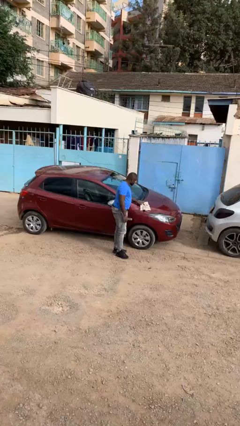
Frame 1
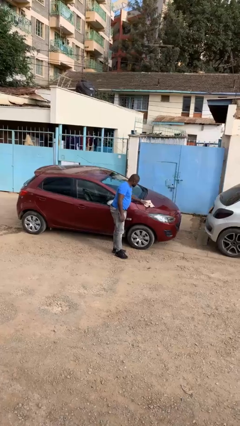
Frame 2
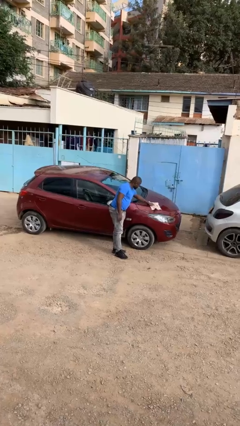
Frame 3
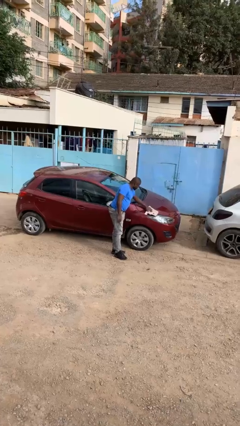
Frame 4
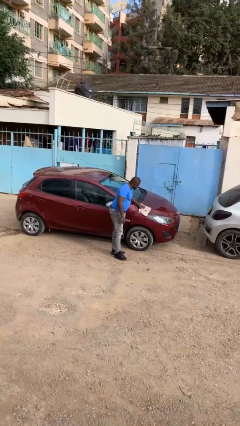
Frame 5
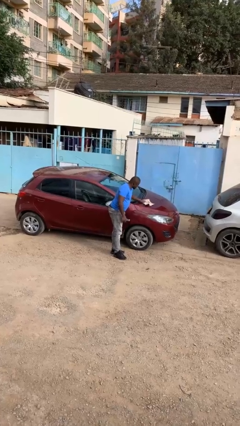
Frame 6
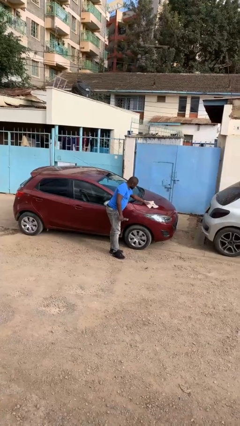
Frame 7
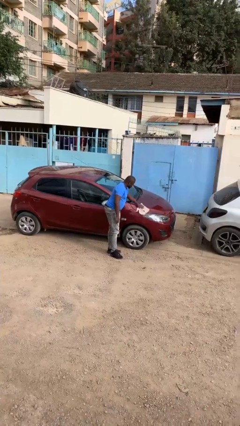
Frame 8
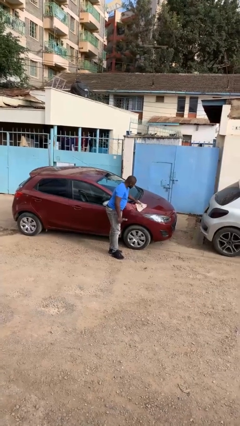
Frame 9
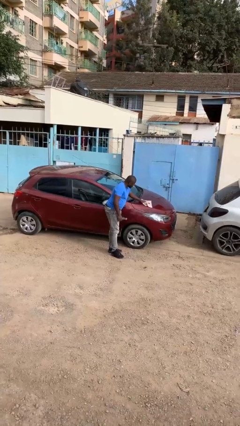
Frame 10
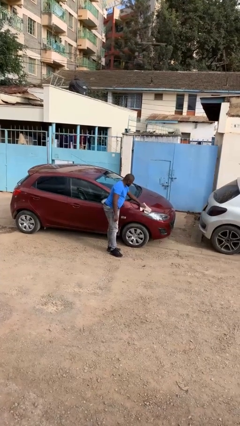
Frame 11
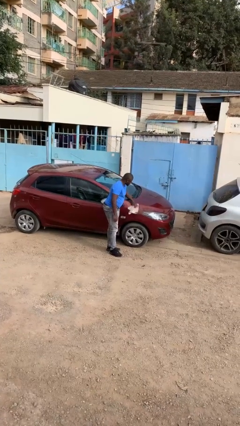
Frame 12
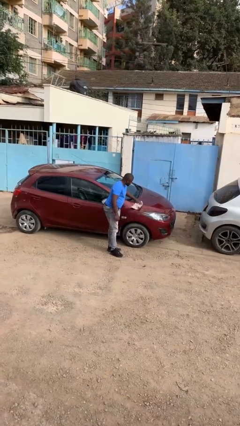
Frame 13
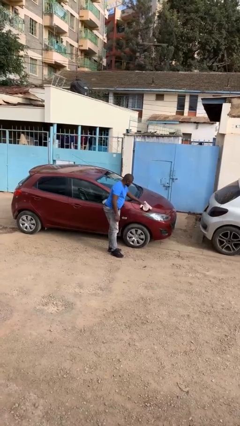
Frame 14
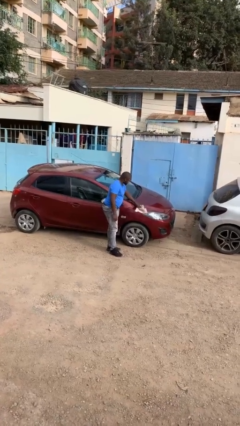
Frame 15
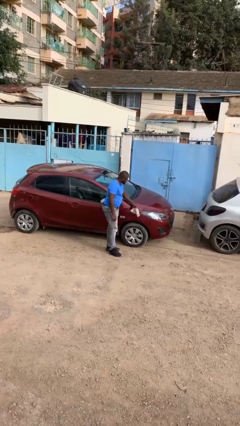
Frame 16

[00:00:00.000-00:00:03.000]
person polishes car with rag

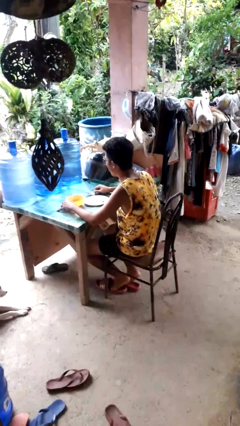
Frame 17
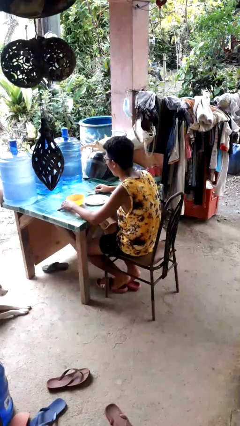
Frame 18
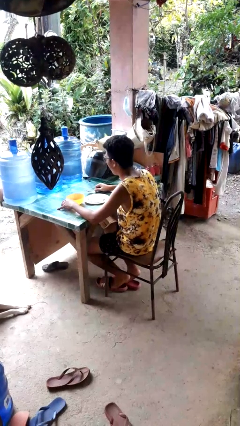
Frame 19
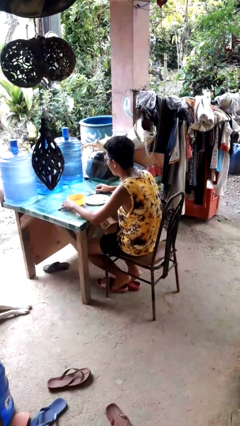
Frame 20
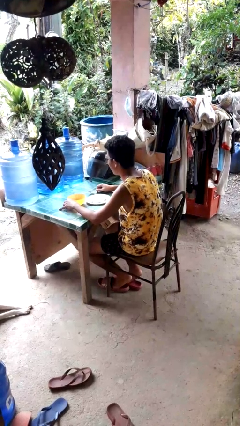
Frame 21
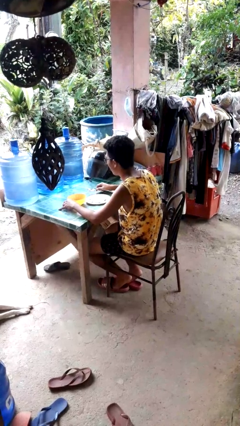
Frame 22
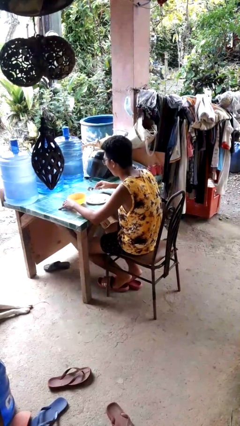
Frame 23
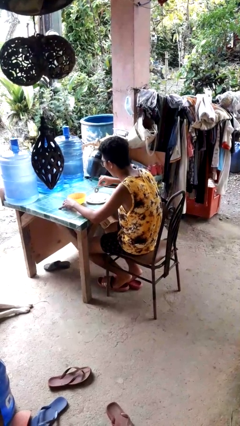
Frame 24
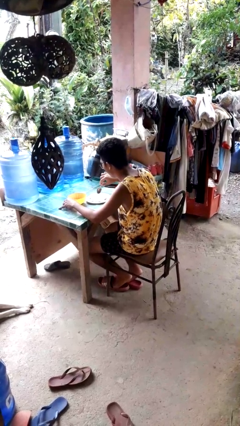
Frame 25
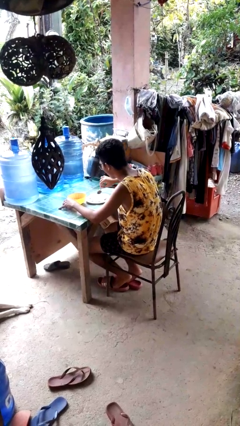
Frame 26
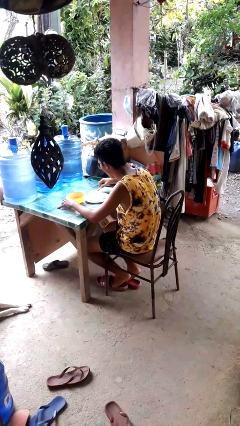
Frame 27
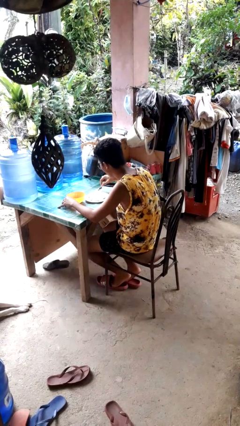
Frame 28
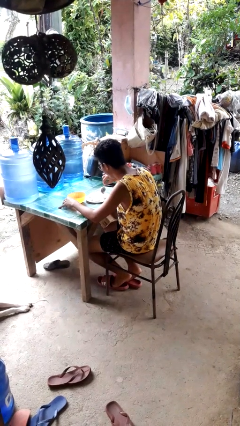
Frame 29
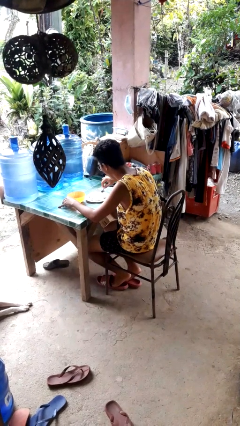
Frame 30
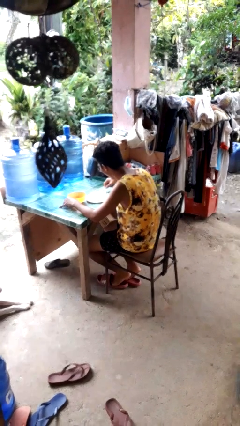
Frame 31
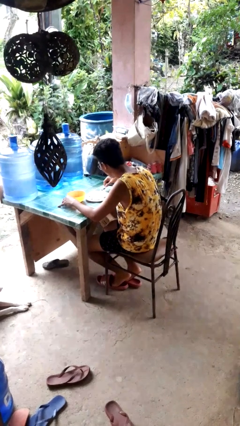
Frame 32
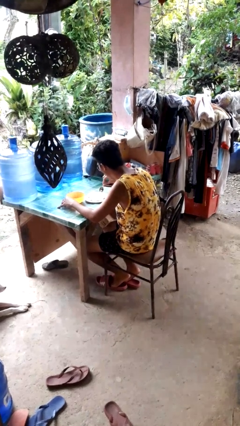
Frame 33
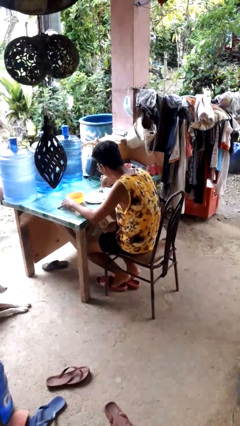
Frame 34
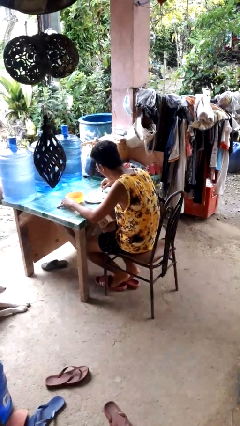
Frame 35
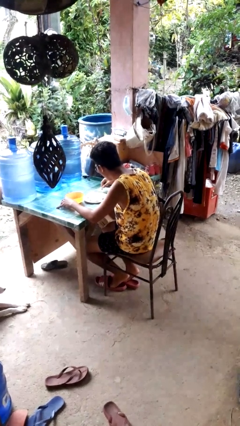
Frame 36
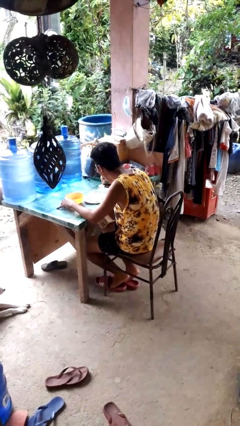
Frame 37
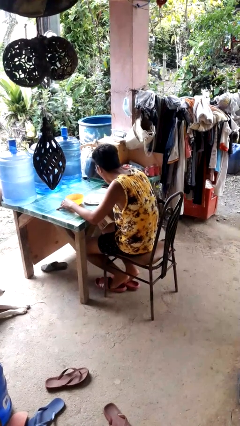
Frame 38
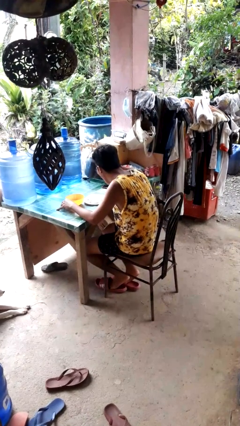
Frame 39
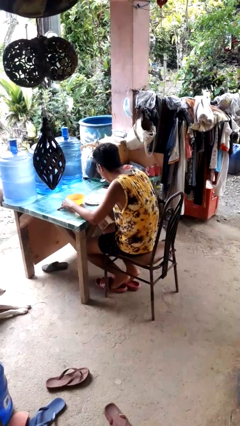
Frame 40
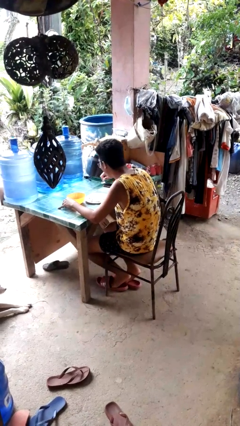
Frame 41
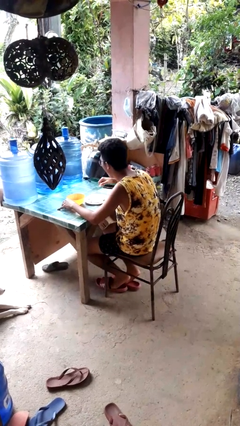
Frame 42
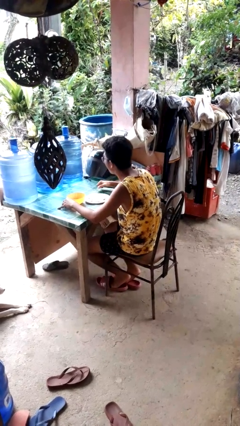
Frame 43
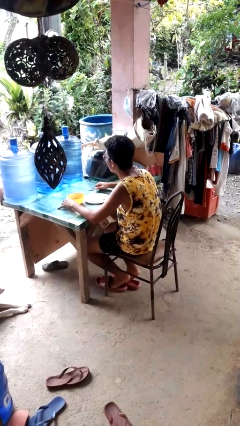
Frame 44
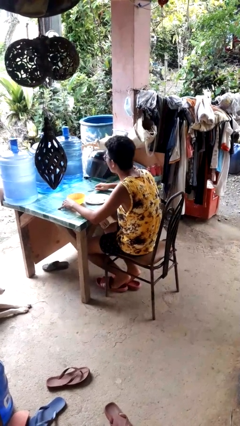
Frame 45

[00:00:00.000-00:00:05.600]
person eats with utensil

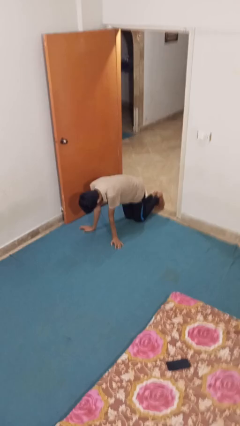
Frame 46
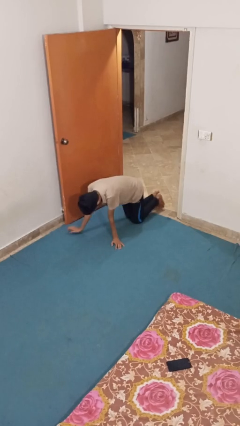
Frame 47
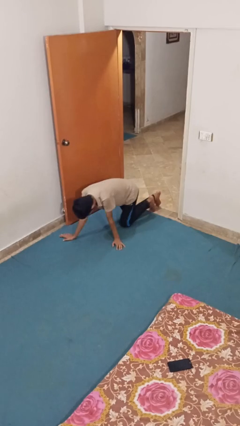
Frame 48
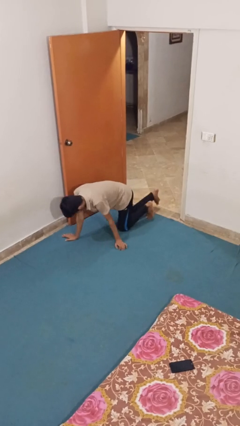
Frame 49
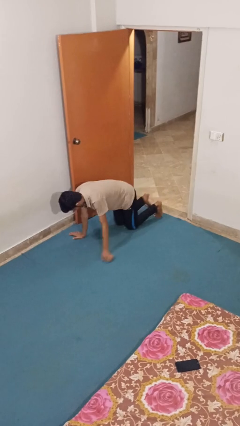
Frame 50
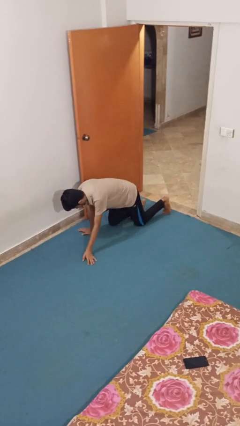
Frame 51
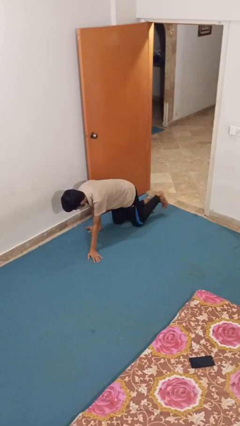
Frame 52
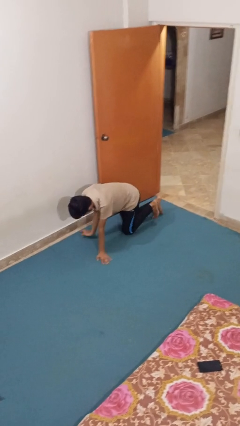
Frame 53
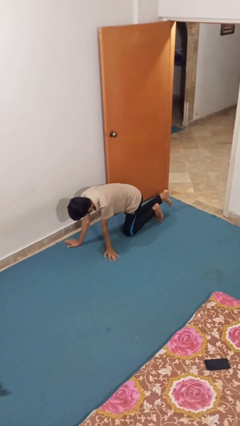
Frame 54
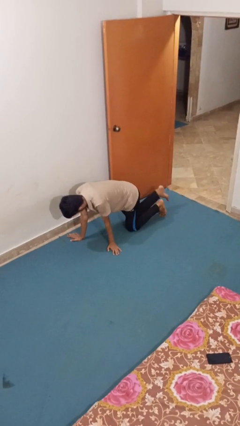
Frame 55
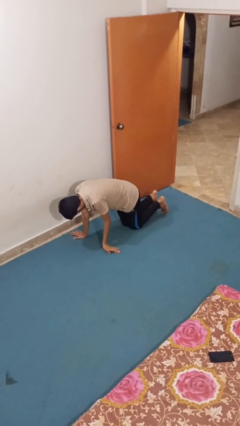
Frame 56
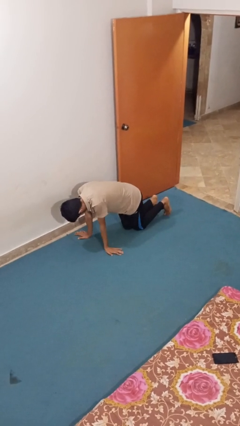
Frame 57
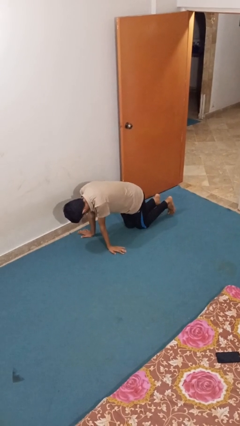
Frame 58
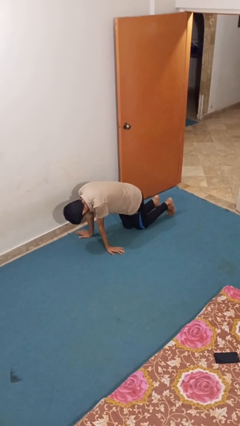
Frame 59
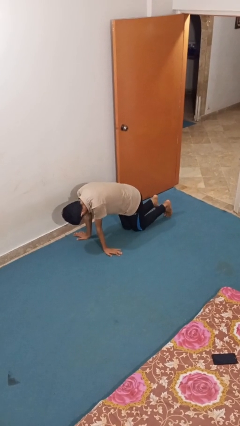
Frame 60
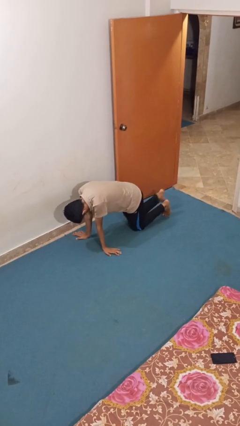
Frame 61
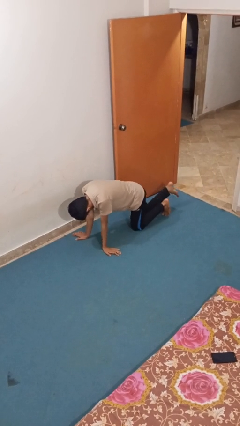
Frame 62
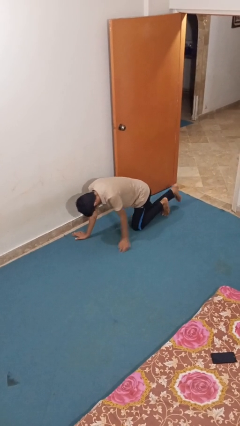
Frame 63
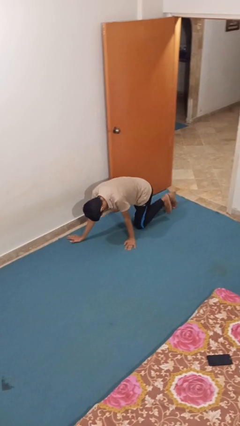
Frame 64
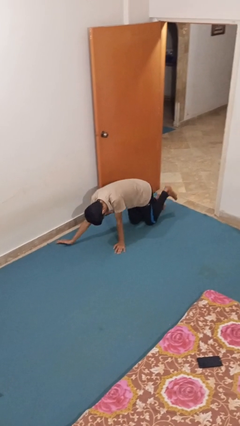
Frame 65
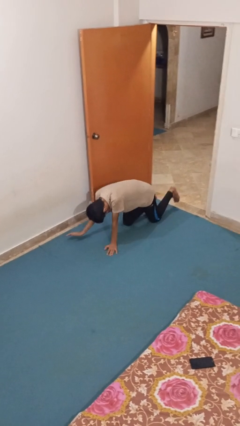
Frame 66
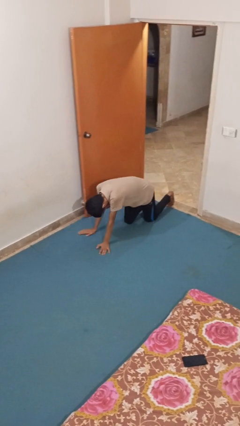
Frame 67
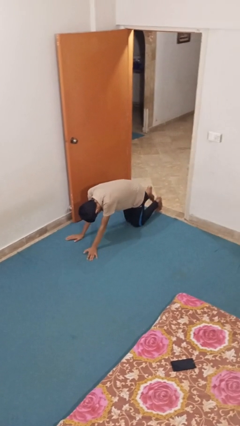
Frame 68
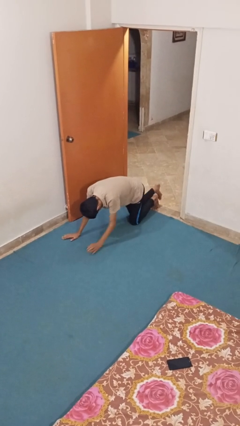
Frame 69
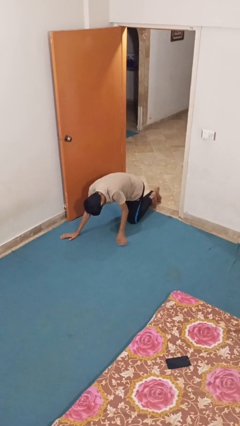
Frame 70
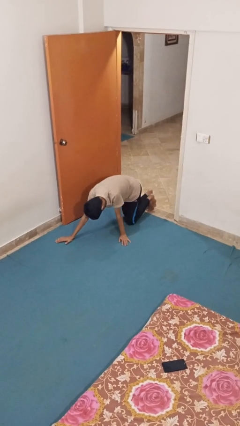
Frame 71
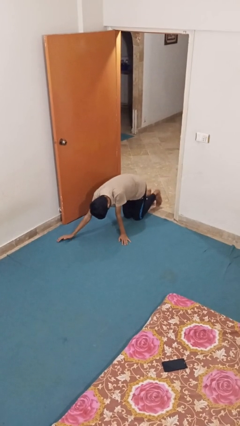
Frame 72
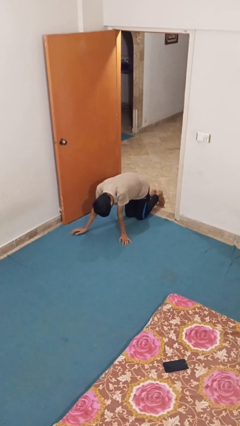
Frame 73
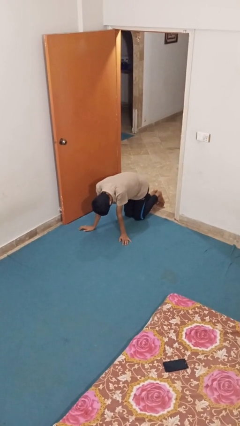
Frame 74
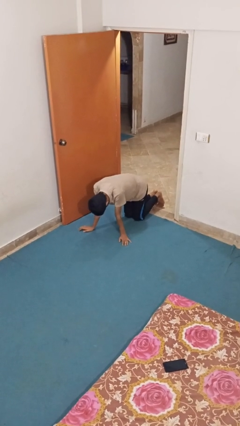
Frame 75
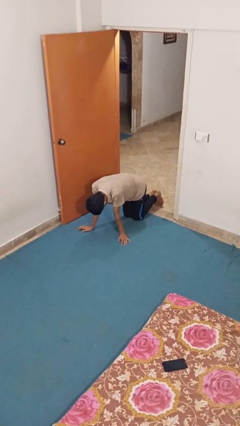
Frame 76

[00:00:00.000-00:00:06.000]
person crawls

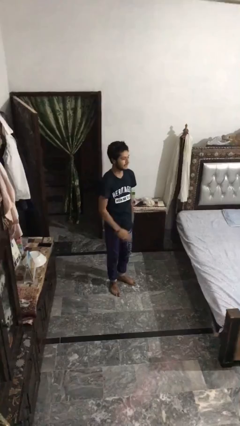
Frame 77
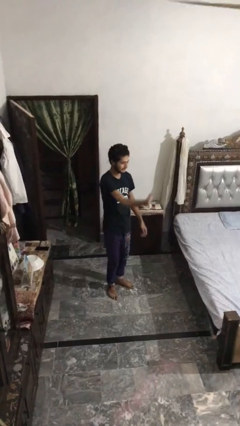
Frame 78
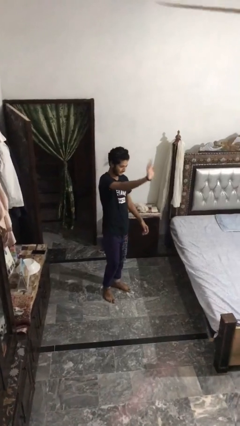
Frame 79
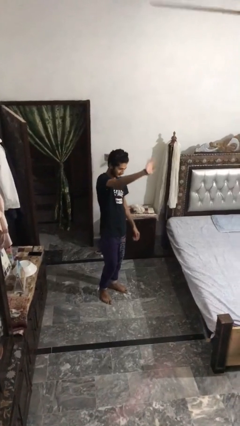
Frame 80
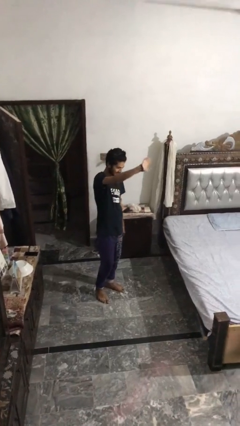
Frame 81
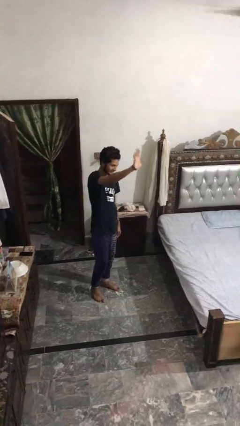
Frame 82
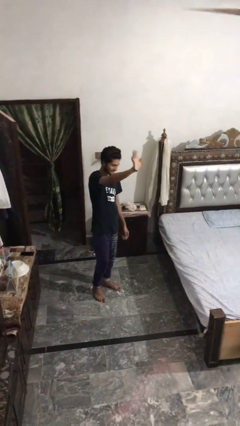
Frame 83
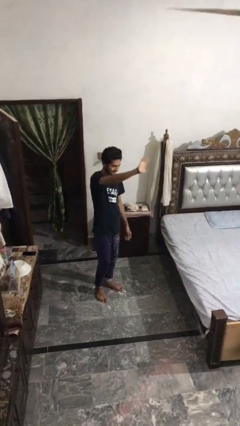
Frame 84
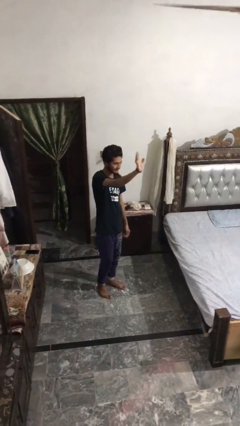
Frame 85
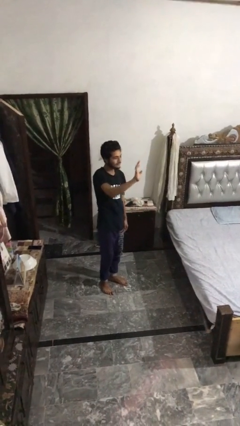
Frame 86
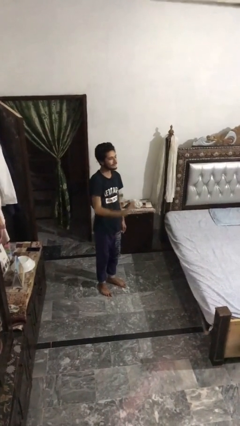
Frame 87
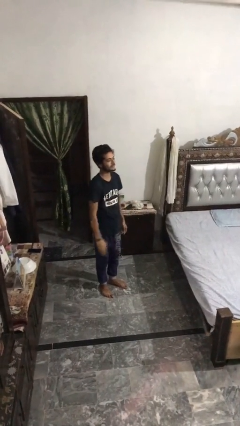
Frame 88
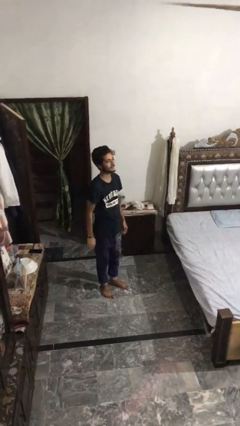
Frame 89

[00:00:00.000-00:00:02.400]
person waves at person

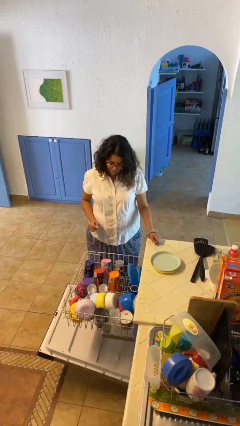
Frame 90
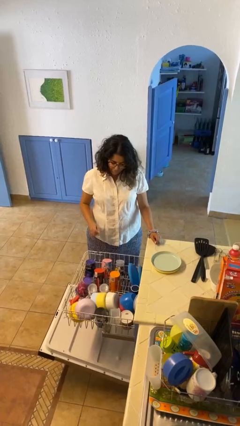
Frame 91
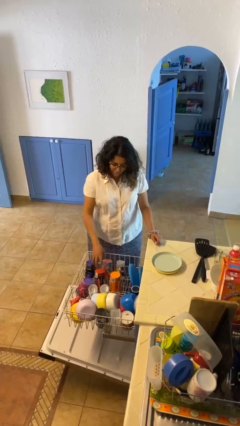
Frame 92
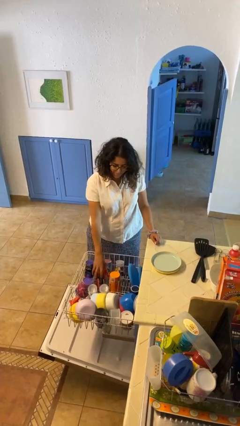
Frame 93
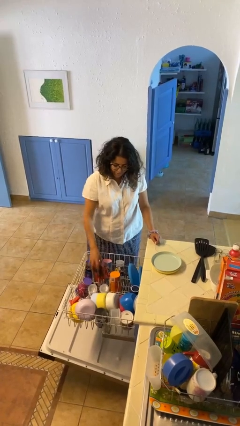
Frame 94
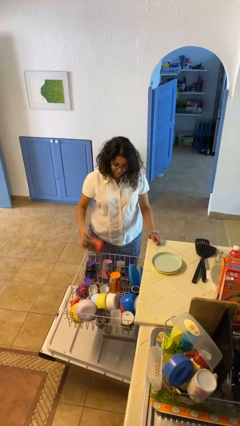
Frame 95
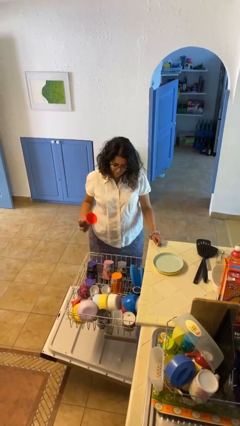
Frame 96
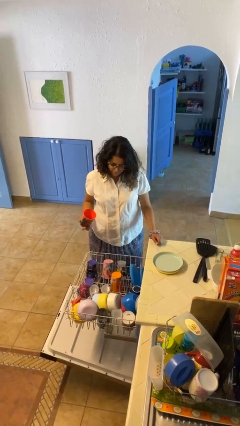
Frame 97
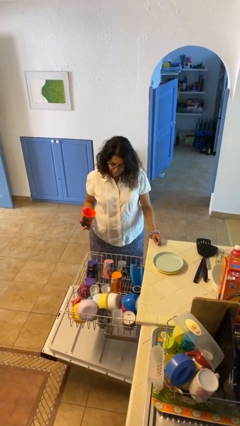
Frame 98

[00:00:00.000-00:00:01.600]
person unloads dishwasher
